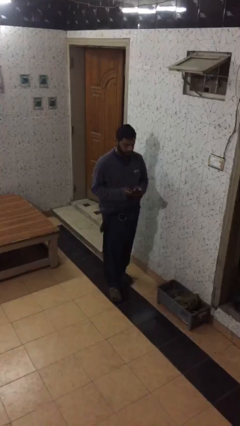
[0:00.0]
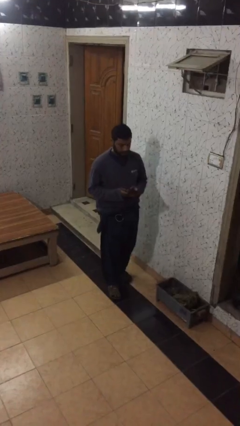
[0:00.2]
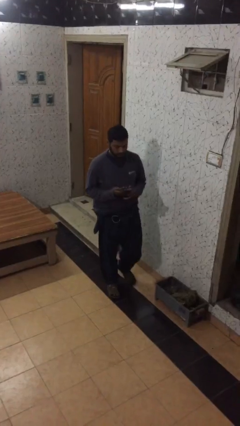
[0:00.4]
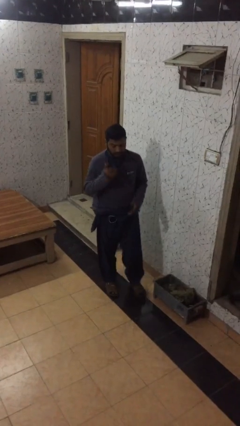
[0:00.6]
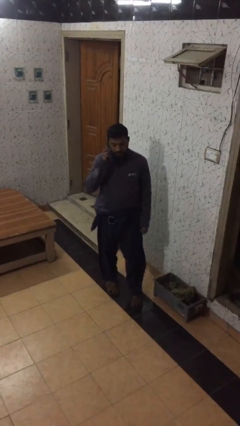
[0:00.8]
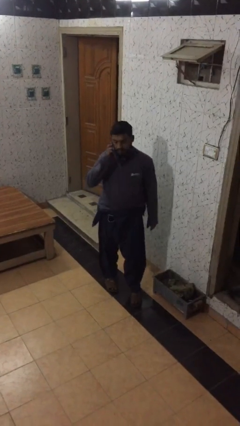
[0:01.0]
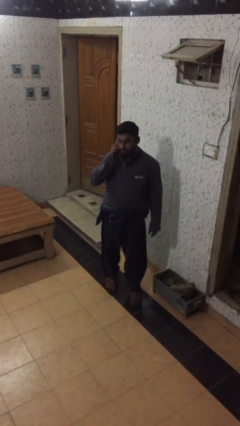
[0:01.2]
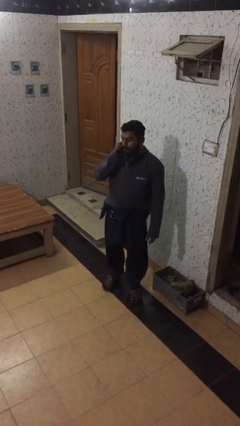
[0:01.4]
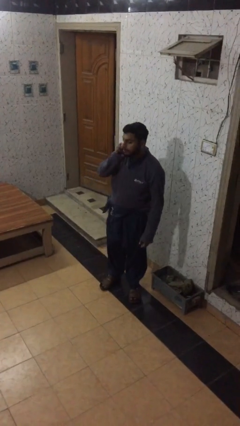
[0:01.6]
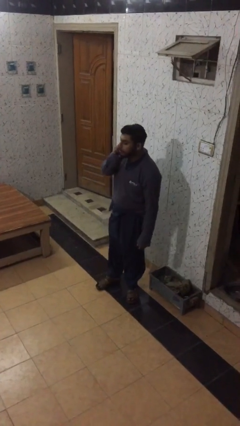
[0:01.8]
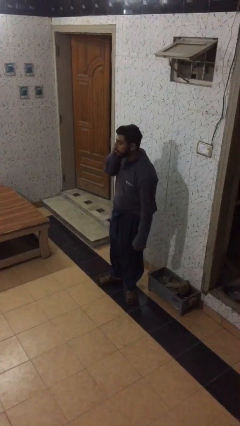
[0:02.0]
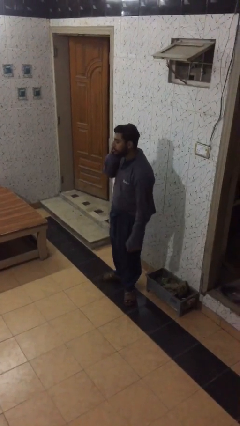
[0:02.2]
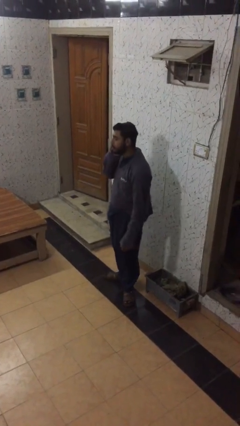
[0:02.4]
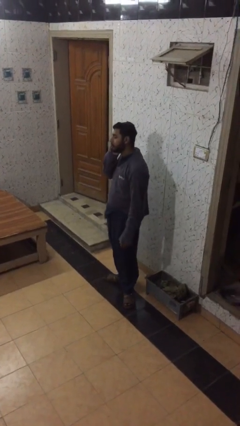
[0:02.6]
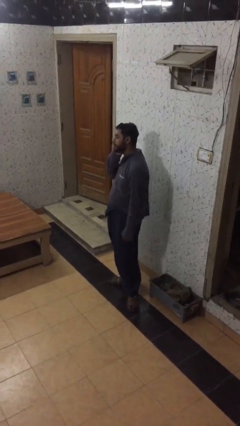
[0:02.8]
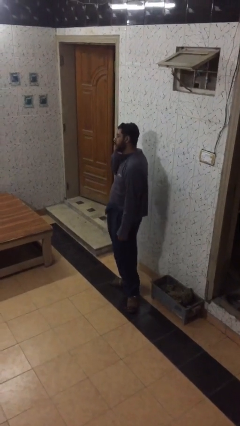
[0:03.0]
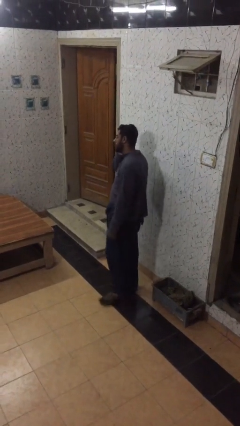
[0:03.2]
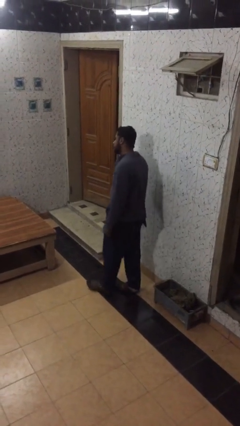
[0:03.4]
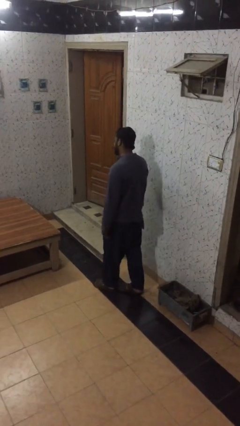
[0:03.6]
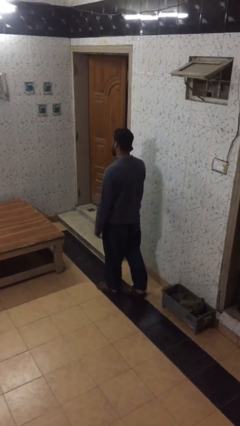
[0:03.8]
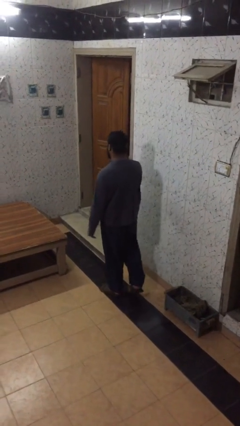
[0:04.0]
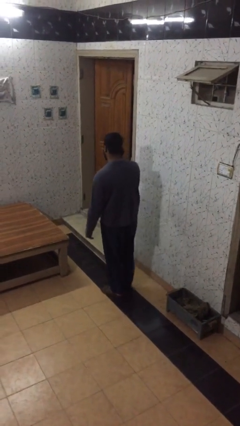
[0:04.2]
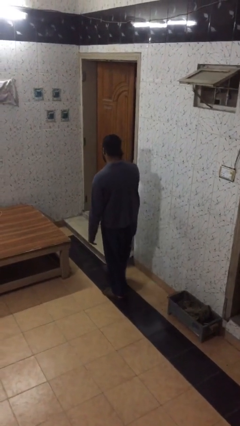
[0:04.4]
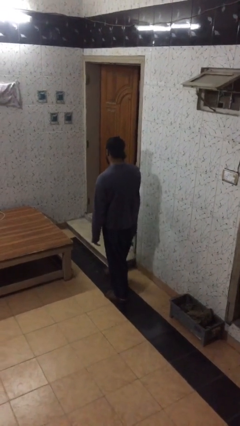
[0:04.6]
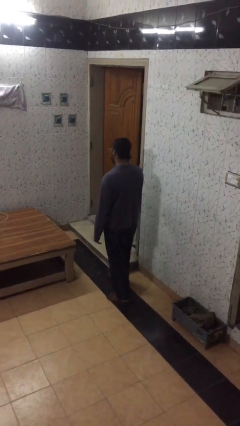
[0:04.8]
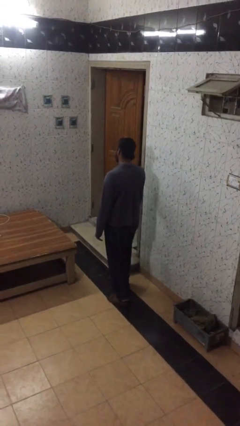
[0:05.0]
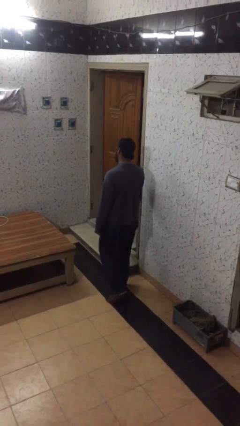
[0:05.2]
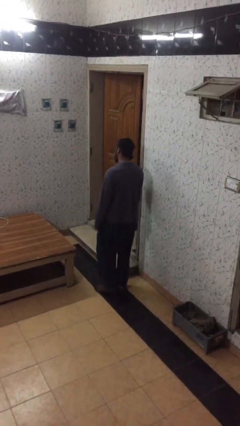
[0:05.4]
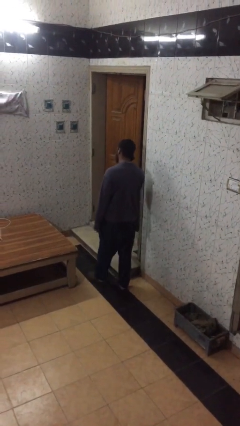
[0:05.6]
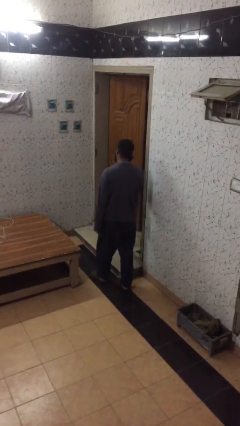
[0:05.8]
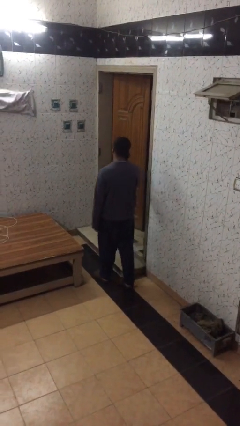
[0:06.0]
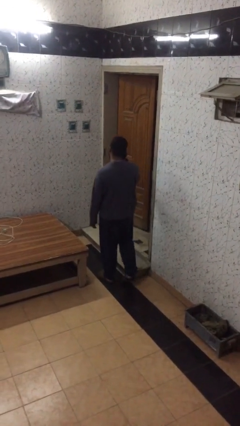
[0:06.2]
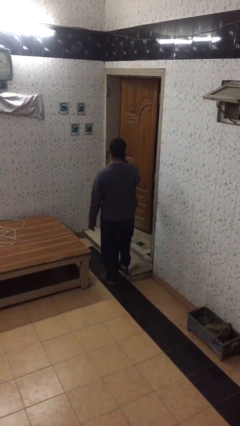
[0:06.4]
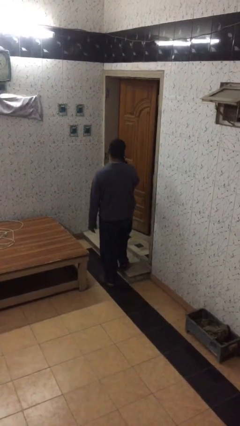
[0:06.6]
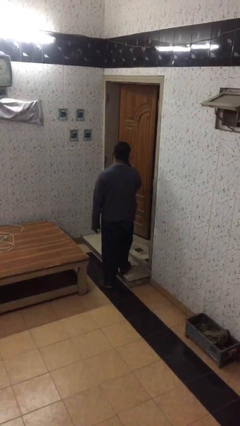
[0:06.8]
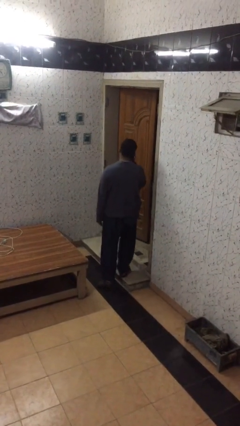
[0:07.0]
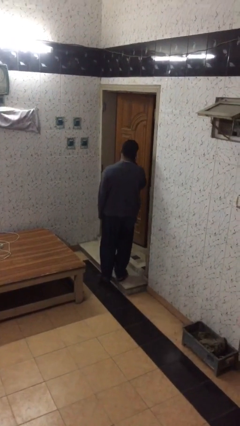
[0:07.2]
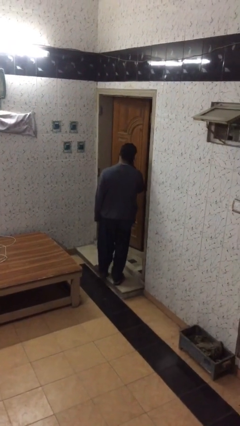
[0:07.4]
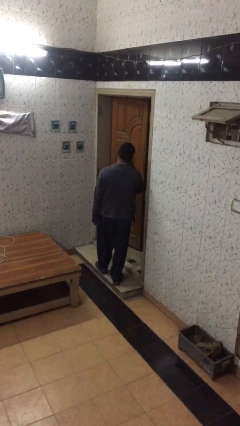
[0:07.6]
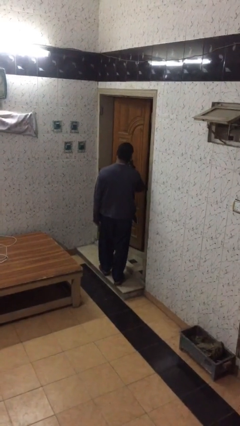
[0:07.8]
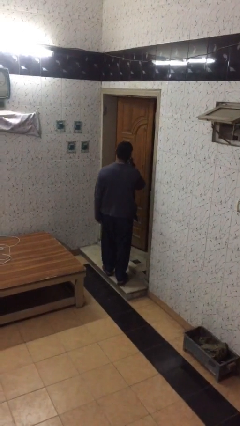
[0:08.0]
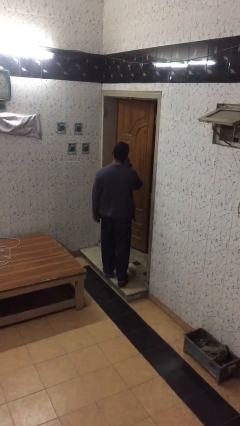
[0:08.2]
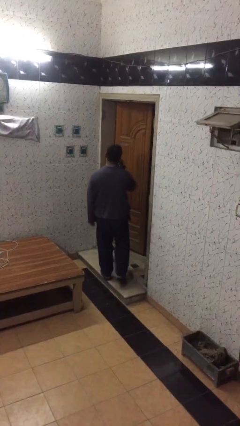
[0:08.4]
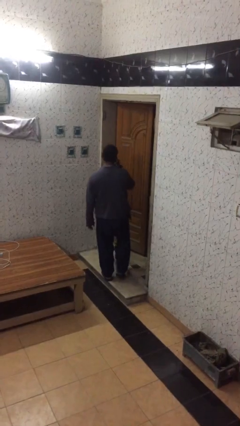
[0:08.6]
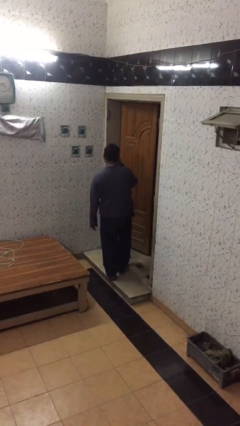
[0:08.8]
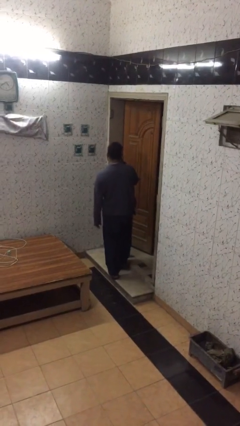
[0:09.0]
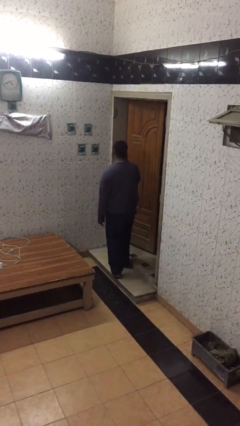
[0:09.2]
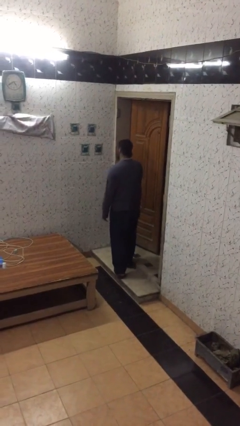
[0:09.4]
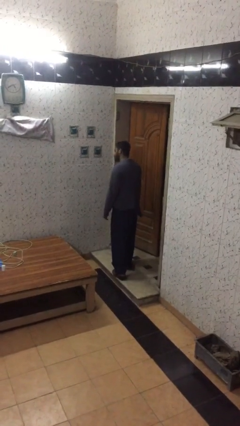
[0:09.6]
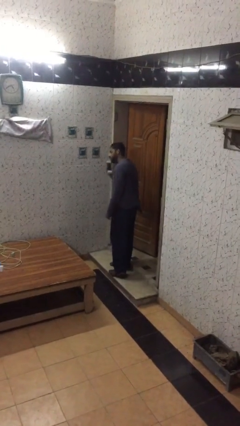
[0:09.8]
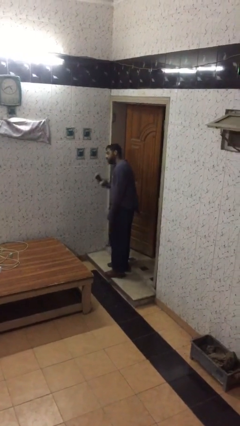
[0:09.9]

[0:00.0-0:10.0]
person talks on phone

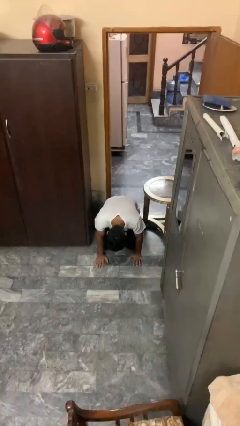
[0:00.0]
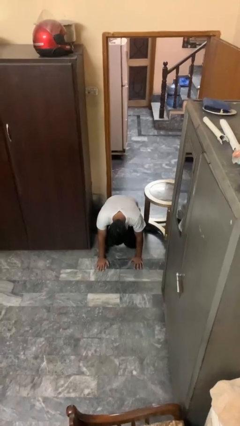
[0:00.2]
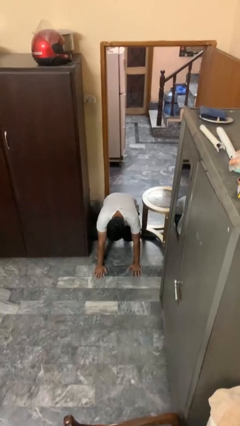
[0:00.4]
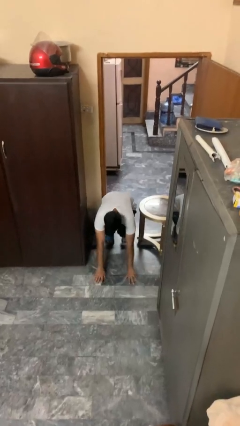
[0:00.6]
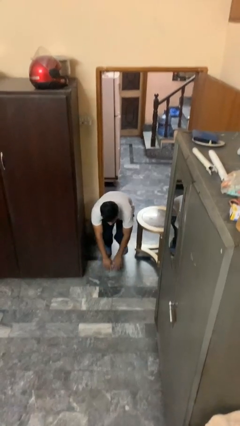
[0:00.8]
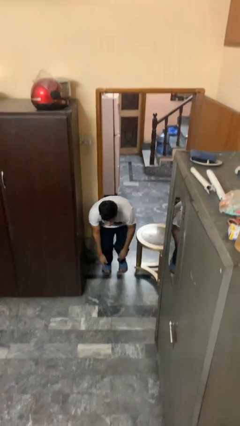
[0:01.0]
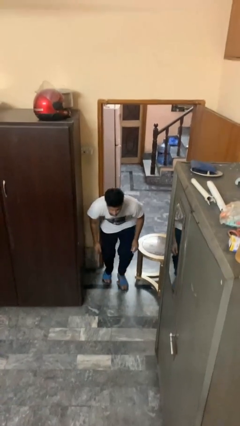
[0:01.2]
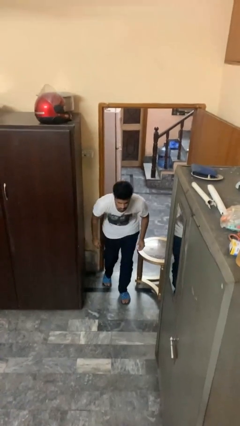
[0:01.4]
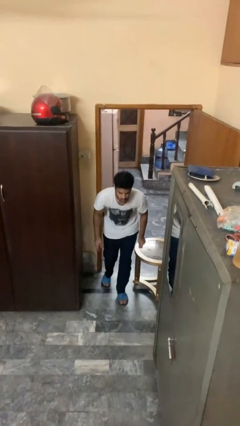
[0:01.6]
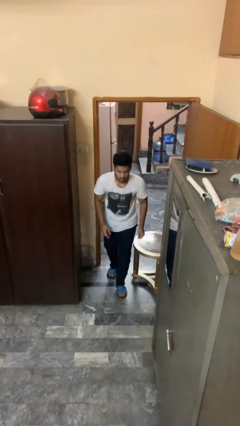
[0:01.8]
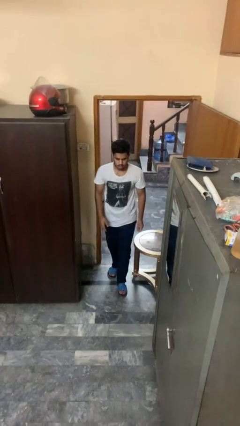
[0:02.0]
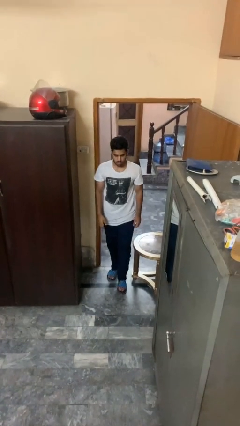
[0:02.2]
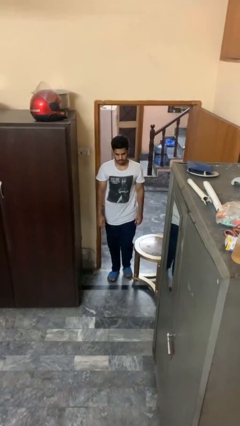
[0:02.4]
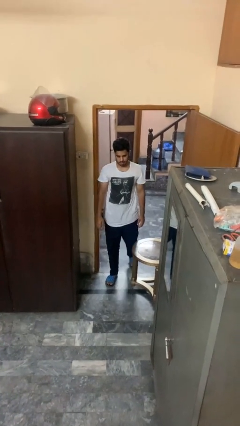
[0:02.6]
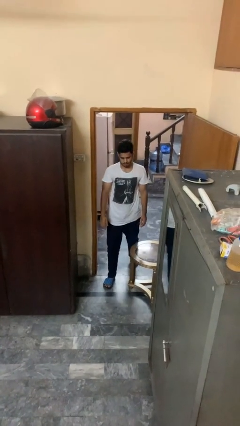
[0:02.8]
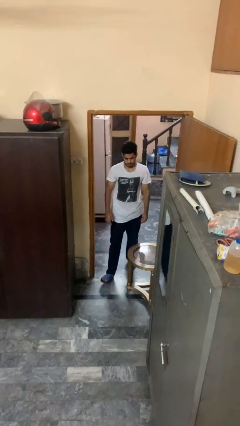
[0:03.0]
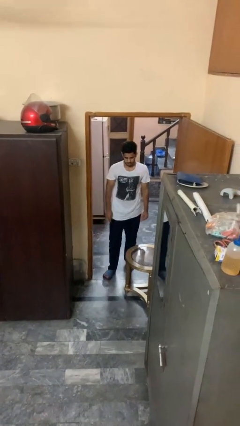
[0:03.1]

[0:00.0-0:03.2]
person stands up from floor

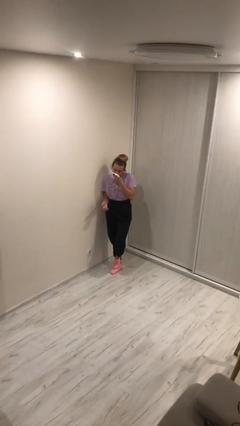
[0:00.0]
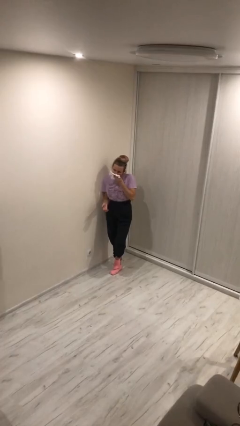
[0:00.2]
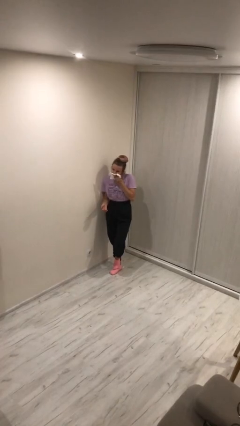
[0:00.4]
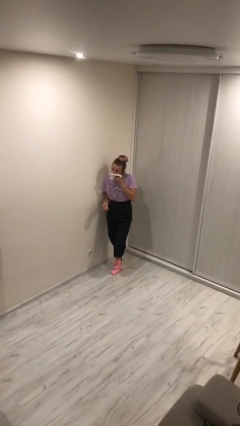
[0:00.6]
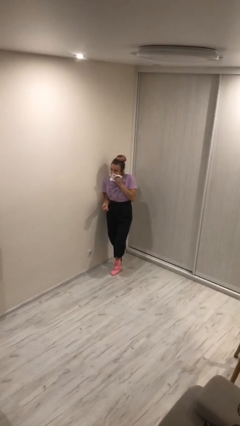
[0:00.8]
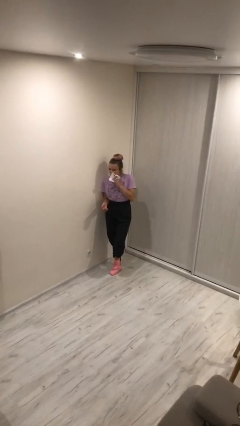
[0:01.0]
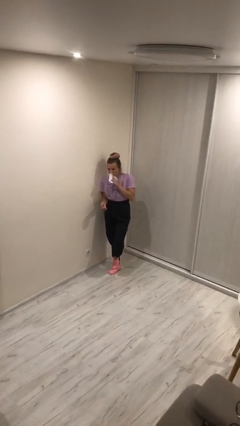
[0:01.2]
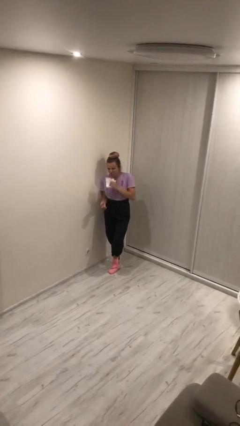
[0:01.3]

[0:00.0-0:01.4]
person wipes mouth with napkin

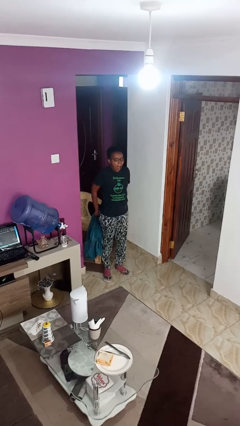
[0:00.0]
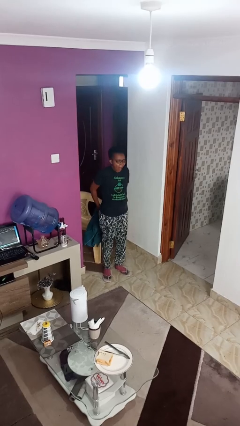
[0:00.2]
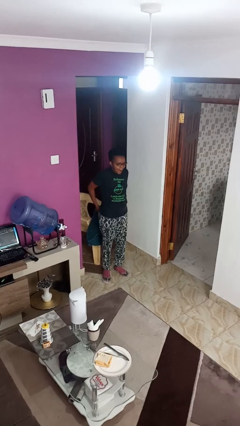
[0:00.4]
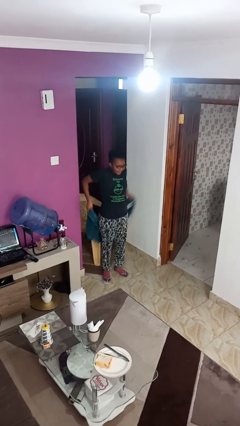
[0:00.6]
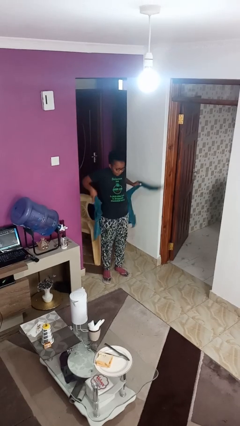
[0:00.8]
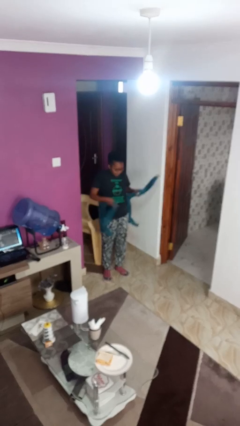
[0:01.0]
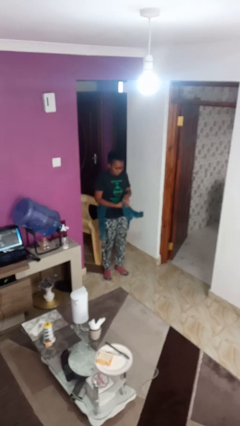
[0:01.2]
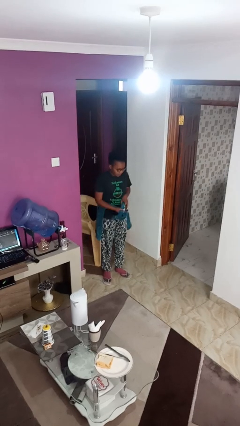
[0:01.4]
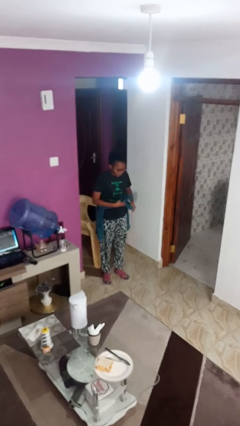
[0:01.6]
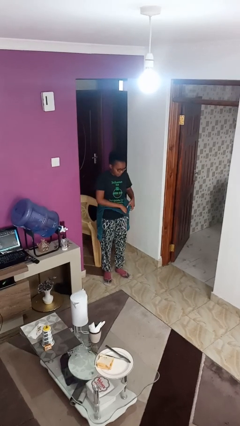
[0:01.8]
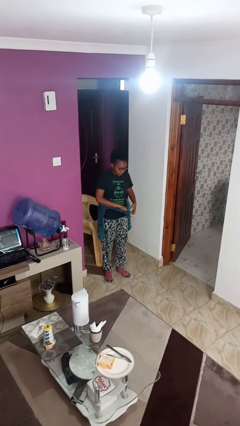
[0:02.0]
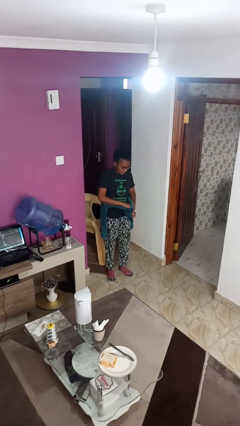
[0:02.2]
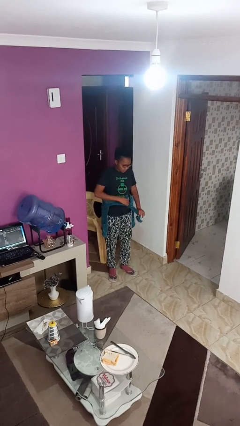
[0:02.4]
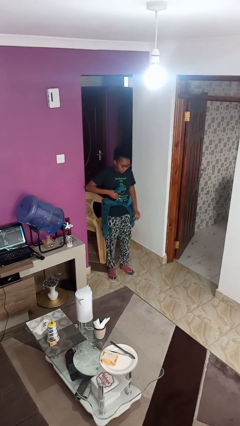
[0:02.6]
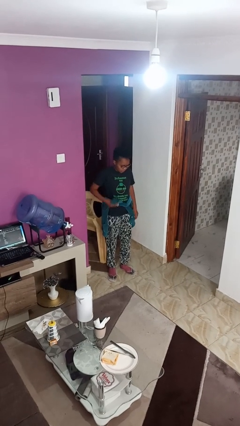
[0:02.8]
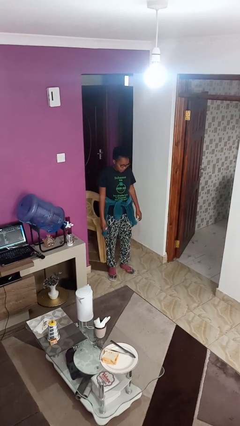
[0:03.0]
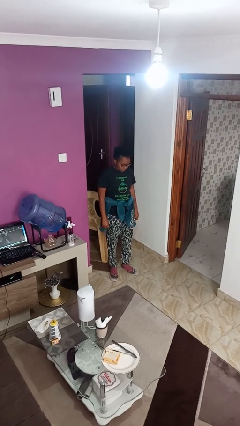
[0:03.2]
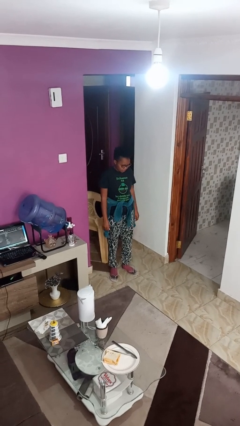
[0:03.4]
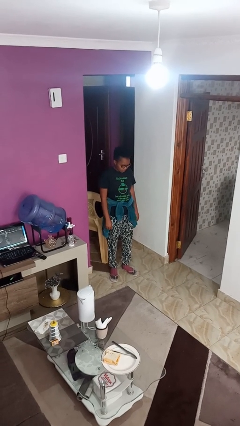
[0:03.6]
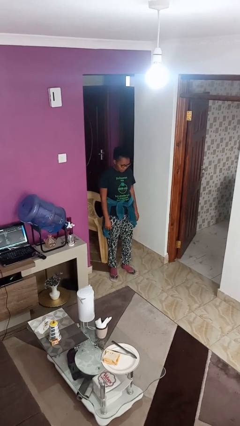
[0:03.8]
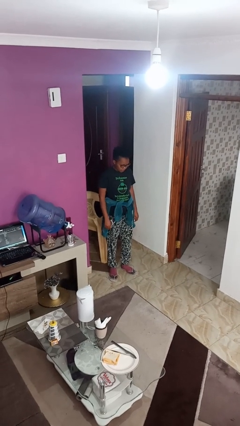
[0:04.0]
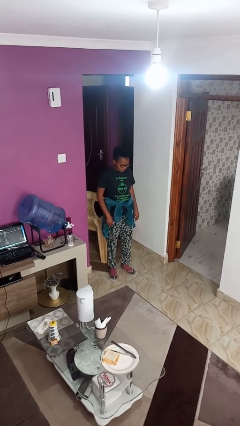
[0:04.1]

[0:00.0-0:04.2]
person ties jacket around waist
